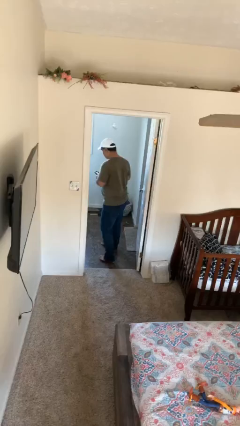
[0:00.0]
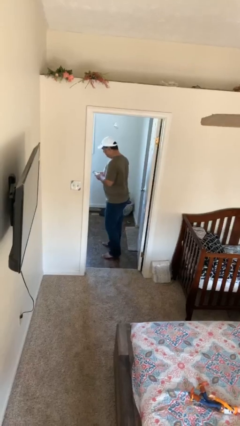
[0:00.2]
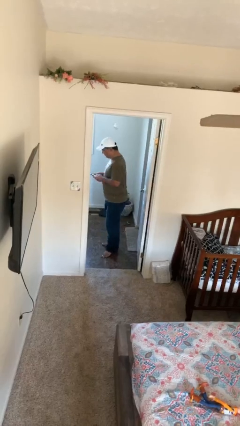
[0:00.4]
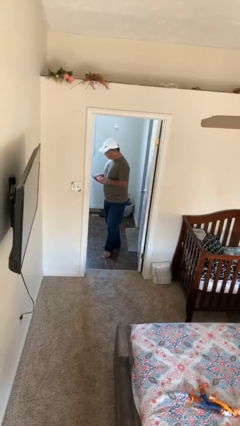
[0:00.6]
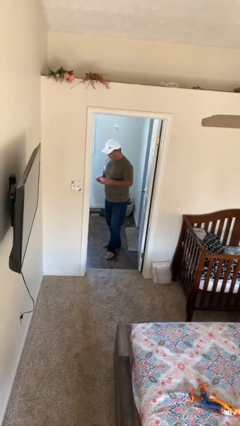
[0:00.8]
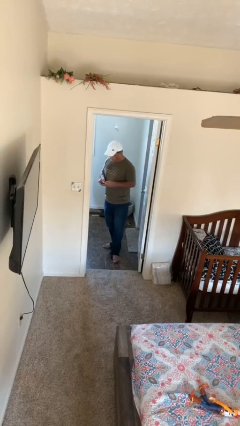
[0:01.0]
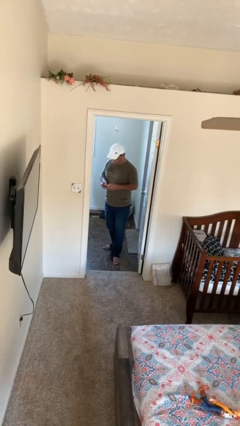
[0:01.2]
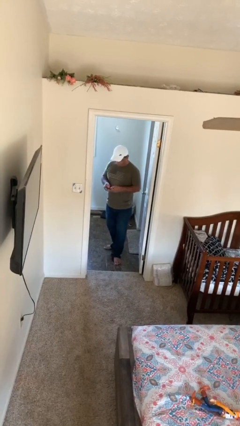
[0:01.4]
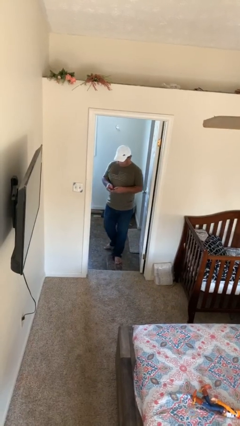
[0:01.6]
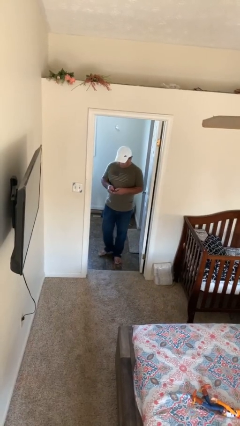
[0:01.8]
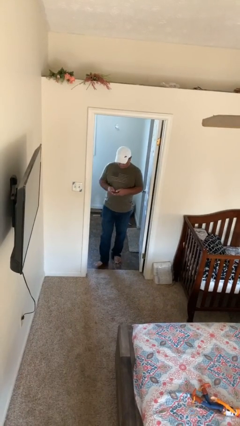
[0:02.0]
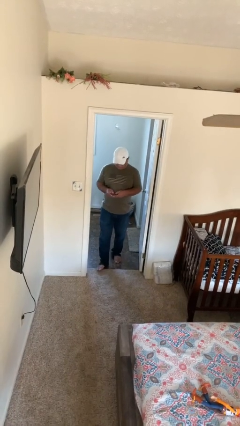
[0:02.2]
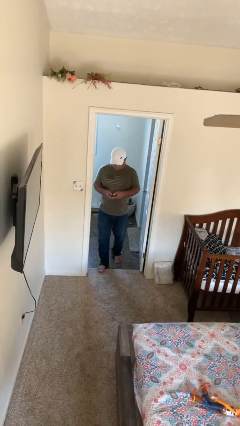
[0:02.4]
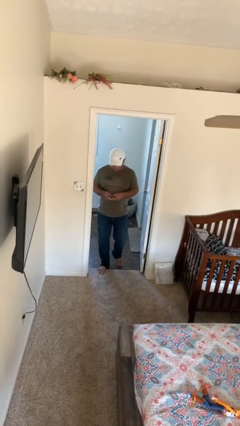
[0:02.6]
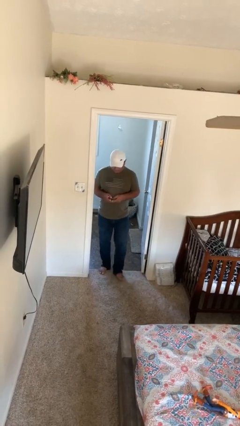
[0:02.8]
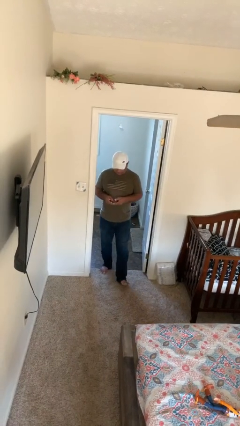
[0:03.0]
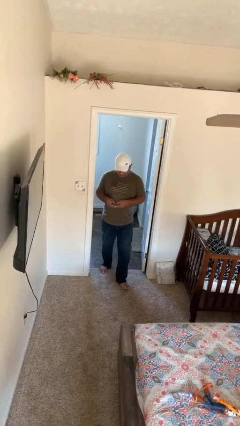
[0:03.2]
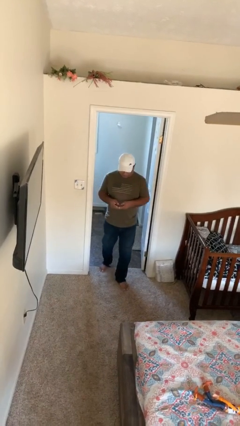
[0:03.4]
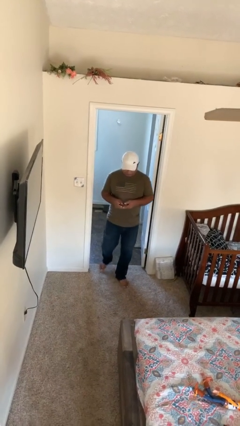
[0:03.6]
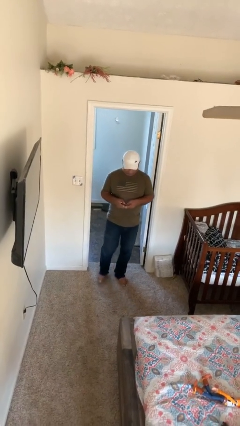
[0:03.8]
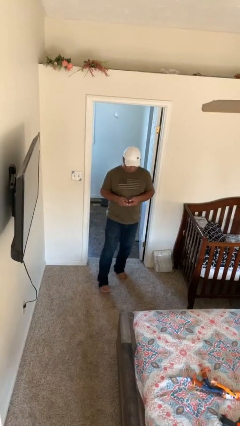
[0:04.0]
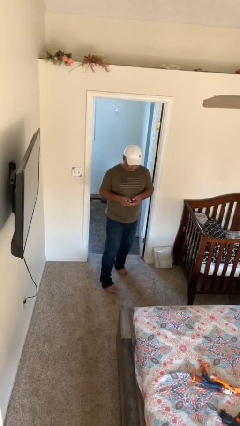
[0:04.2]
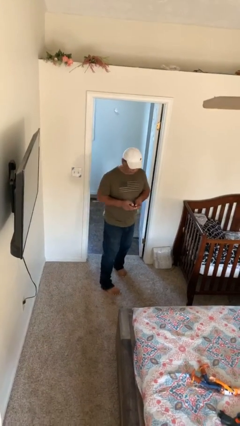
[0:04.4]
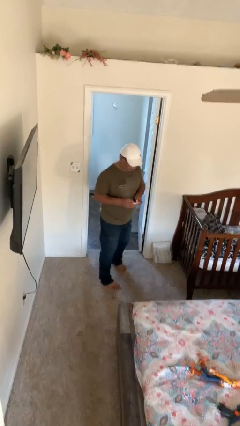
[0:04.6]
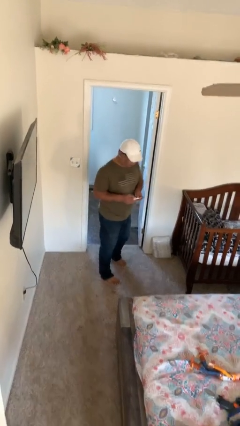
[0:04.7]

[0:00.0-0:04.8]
person enters scene through structure

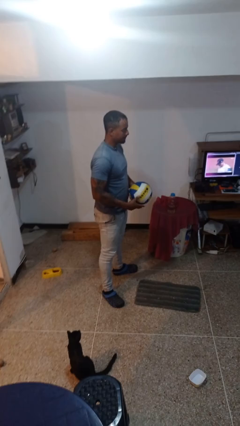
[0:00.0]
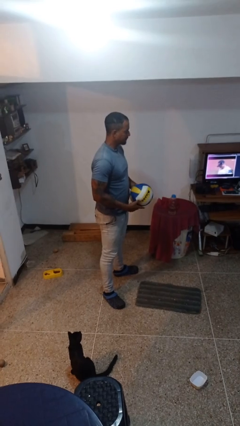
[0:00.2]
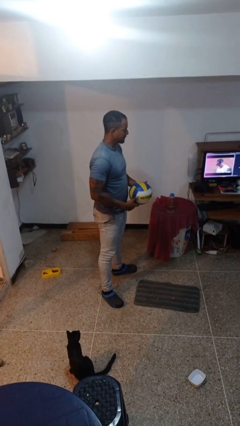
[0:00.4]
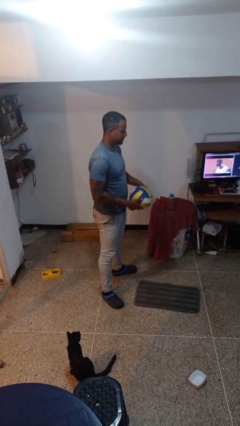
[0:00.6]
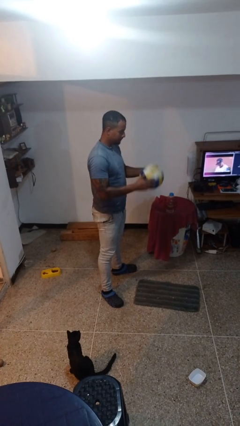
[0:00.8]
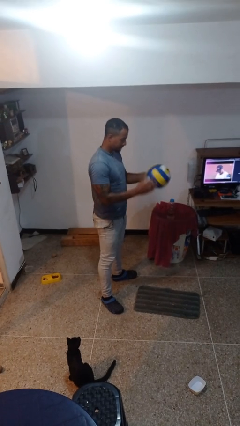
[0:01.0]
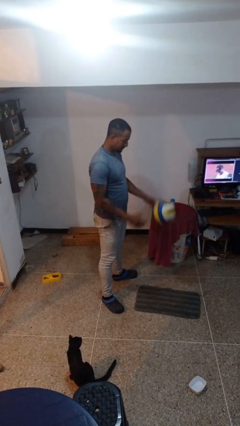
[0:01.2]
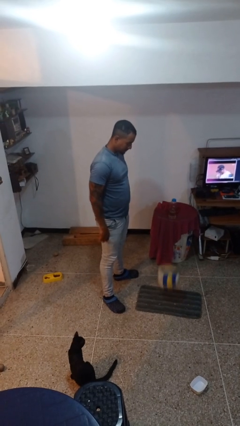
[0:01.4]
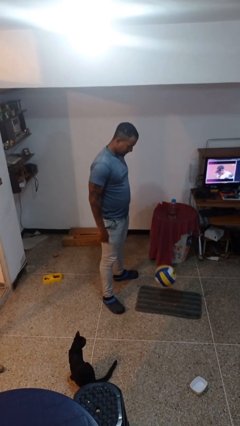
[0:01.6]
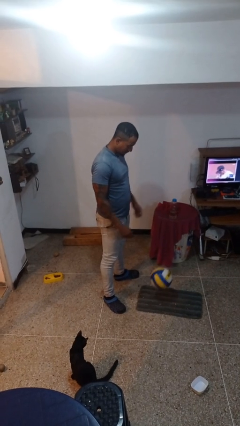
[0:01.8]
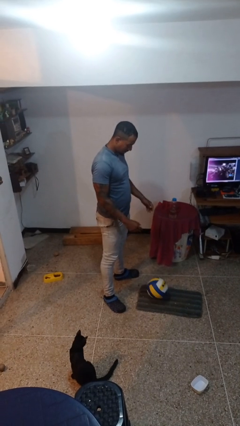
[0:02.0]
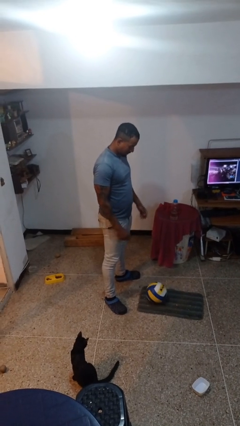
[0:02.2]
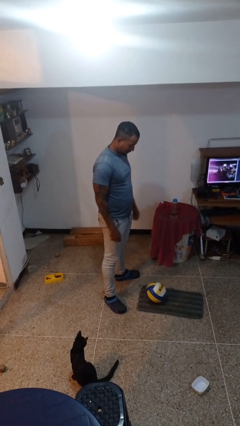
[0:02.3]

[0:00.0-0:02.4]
person throws object into air

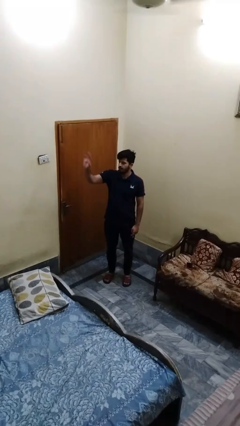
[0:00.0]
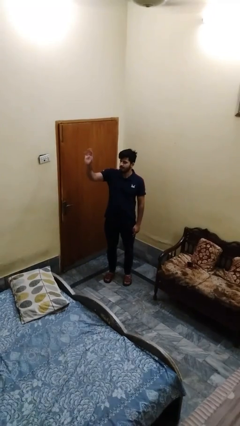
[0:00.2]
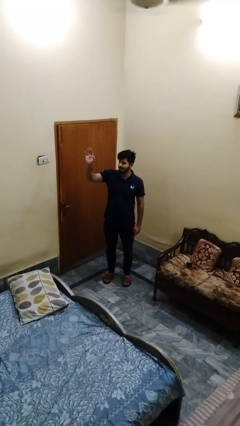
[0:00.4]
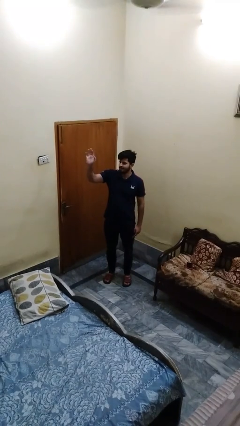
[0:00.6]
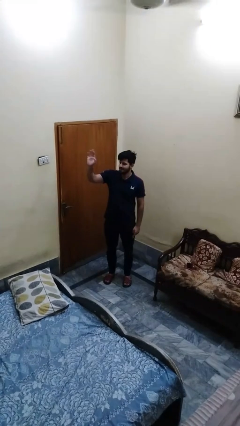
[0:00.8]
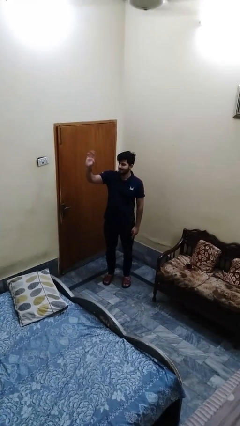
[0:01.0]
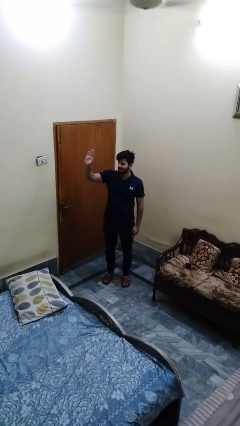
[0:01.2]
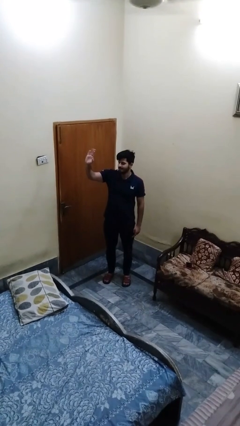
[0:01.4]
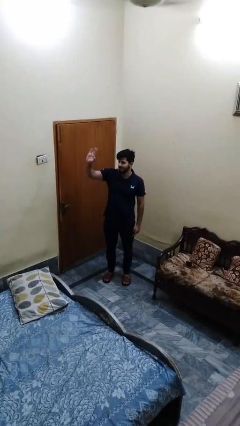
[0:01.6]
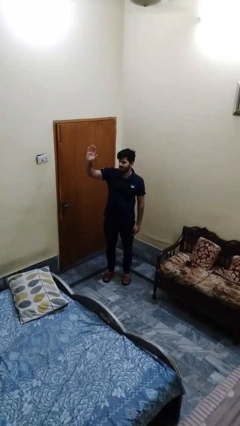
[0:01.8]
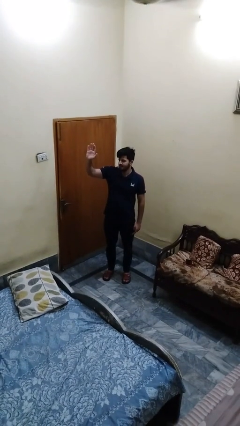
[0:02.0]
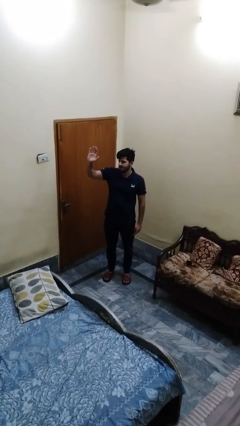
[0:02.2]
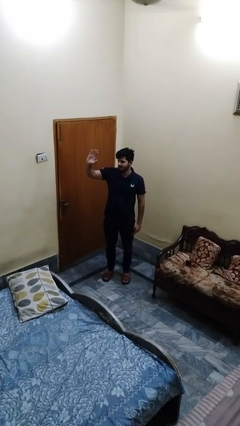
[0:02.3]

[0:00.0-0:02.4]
person waves at person

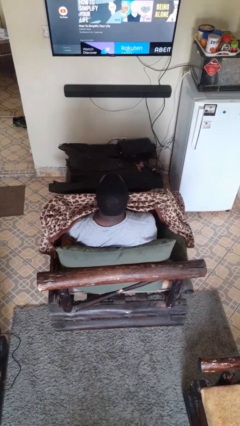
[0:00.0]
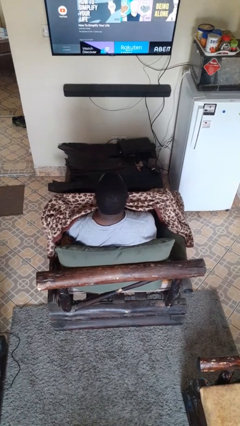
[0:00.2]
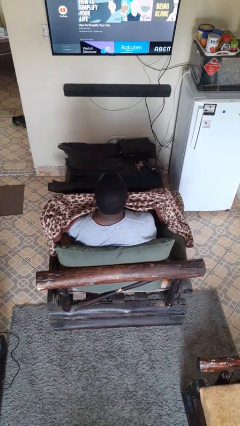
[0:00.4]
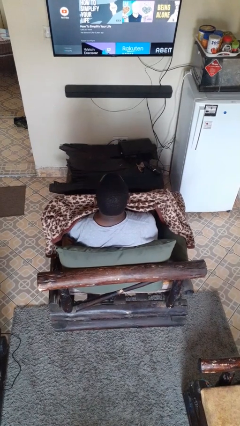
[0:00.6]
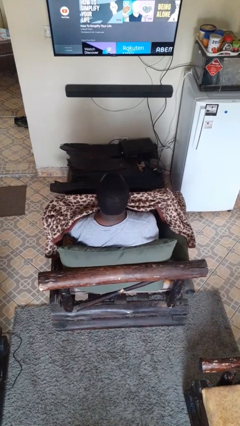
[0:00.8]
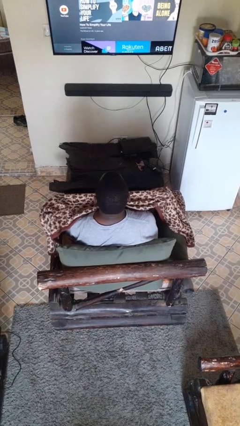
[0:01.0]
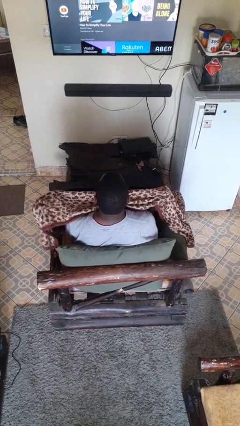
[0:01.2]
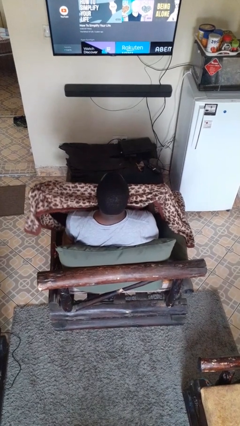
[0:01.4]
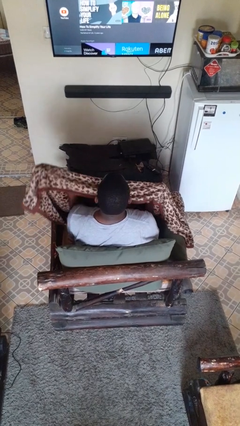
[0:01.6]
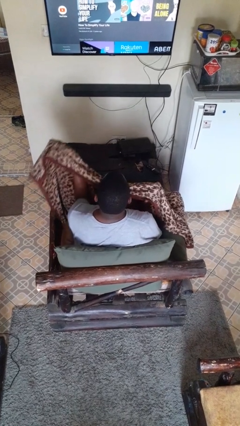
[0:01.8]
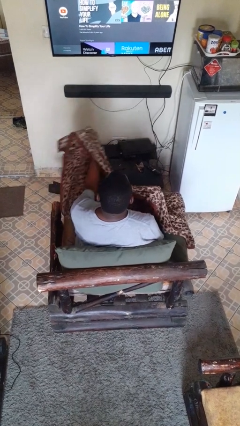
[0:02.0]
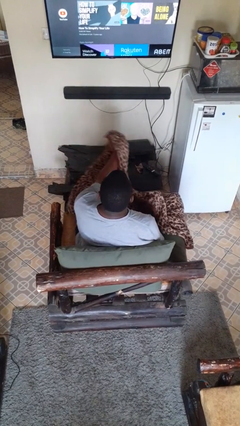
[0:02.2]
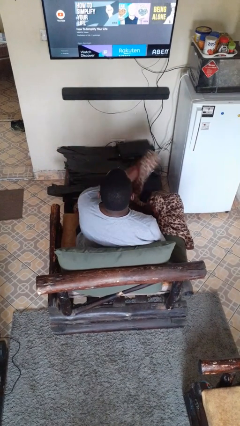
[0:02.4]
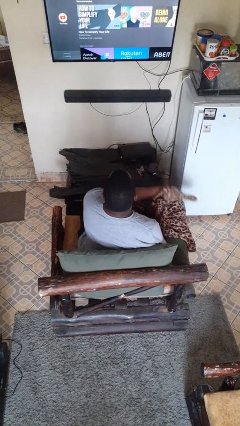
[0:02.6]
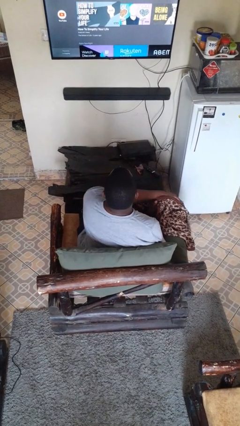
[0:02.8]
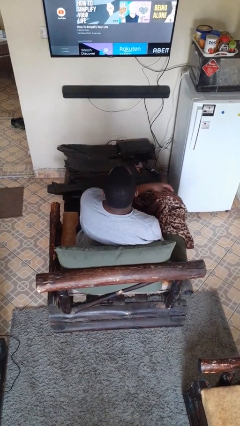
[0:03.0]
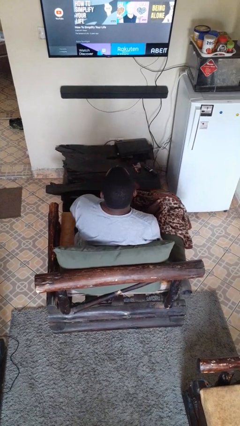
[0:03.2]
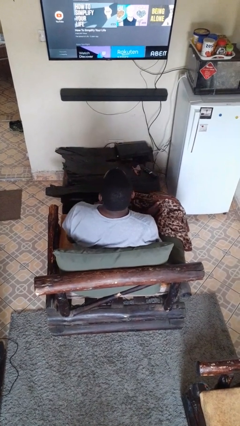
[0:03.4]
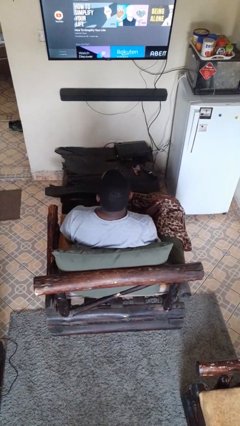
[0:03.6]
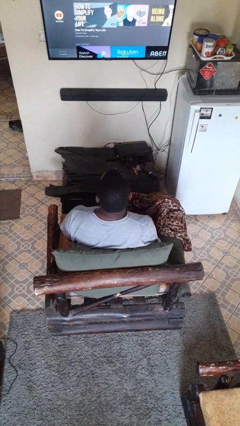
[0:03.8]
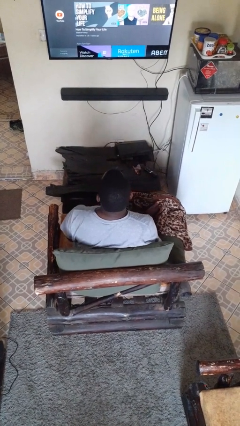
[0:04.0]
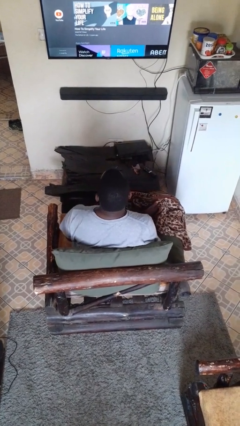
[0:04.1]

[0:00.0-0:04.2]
person uncovers with blanket

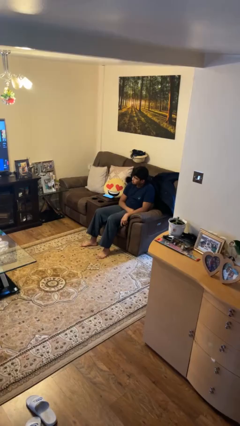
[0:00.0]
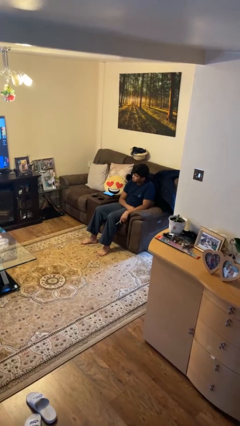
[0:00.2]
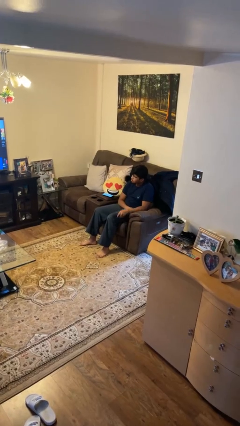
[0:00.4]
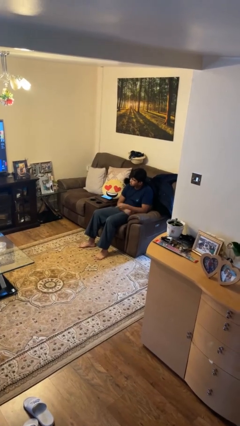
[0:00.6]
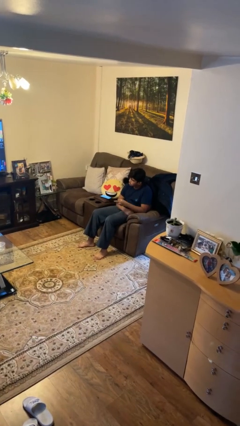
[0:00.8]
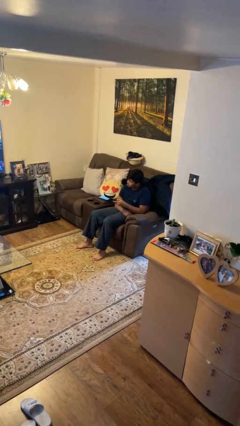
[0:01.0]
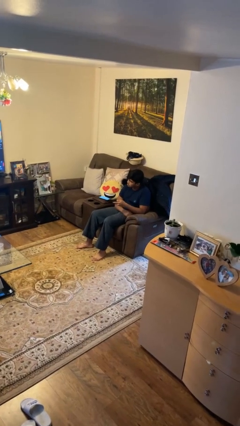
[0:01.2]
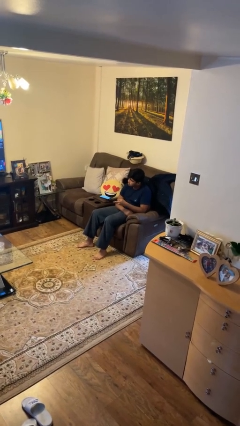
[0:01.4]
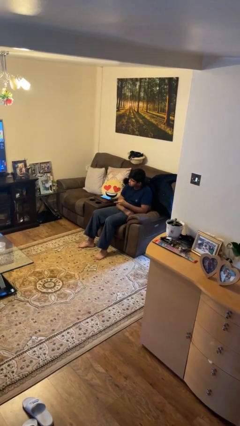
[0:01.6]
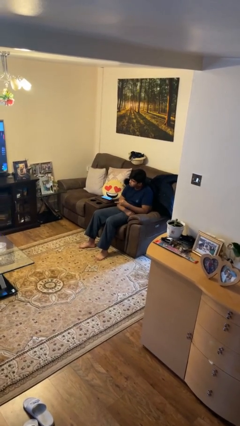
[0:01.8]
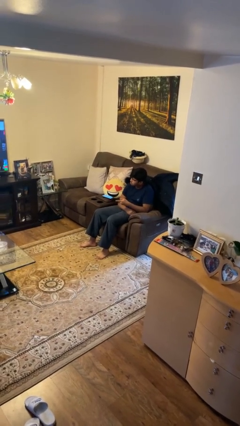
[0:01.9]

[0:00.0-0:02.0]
person uses television remote

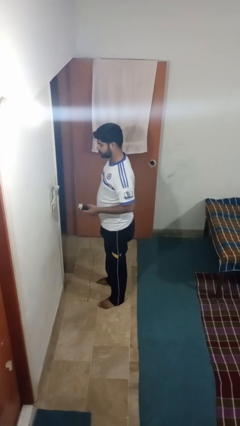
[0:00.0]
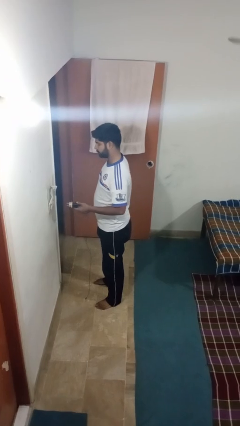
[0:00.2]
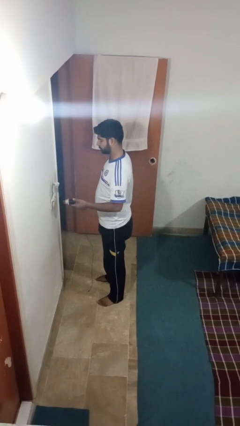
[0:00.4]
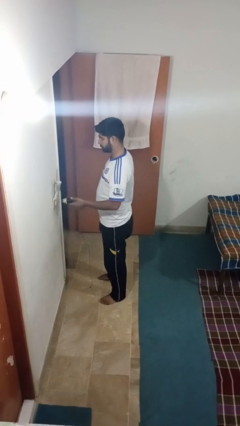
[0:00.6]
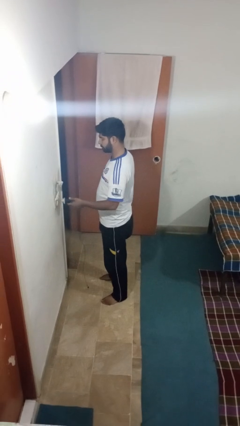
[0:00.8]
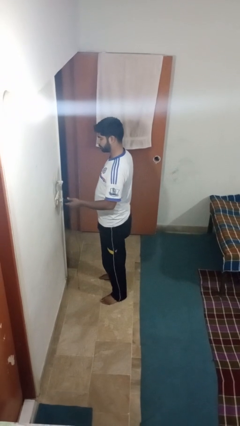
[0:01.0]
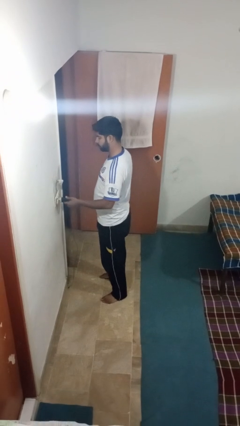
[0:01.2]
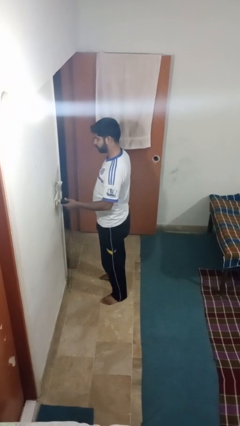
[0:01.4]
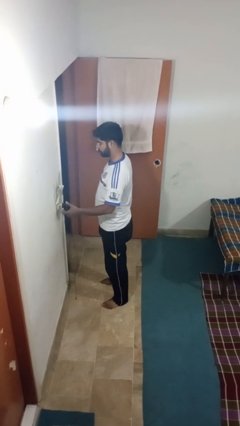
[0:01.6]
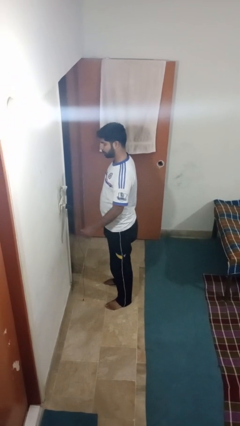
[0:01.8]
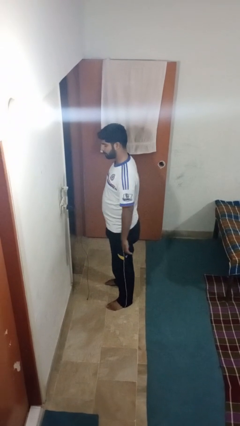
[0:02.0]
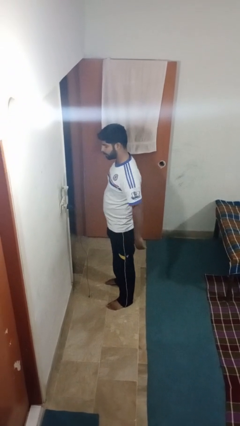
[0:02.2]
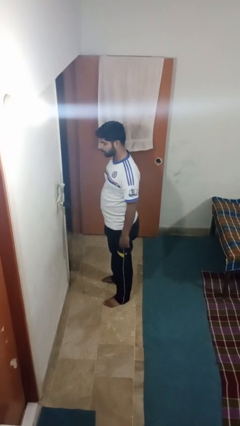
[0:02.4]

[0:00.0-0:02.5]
person plugs into electrical socket
